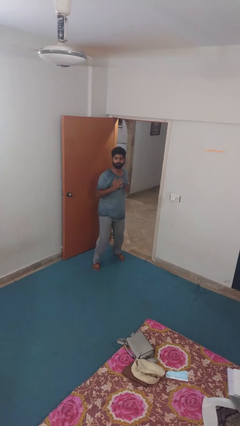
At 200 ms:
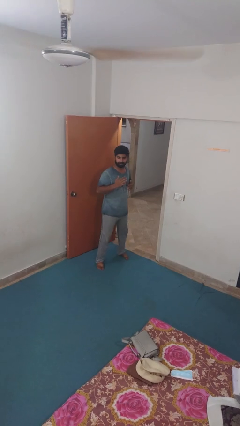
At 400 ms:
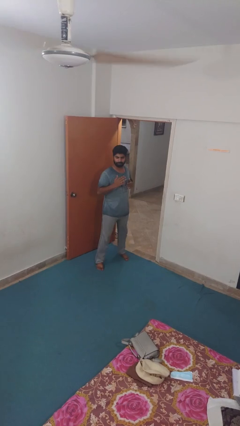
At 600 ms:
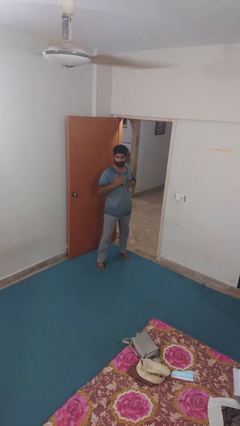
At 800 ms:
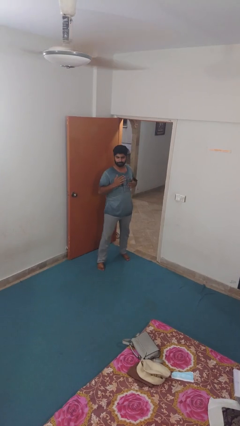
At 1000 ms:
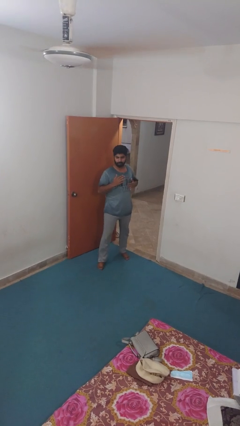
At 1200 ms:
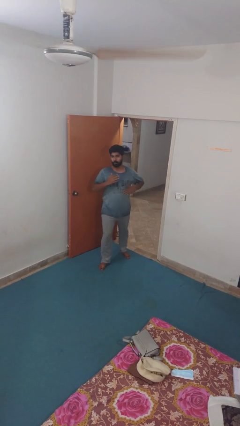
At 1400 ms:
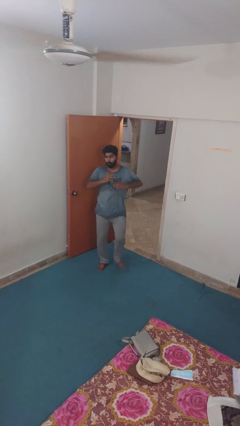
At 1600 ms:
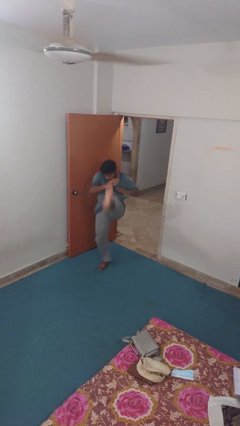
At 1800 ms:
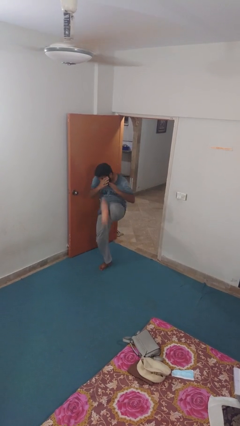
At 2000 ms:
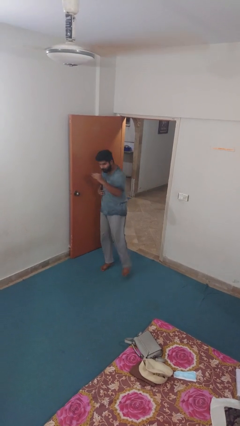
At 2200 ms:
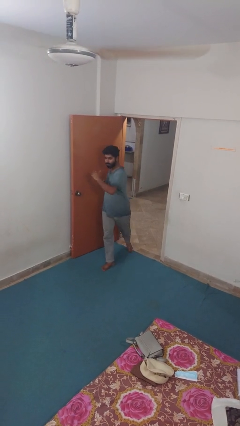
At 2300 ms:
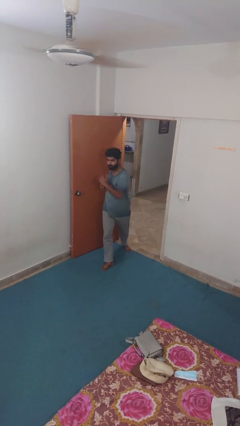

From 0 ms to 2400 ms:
person karate kicks

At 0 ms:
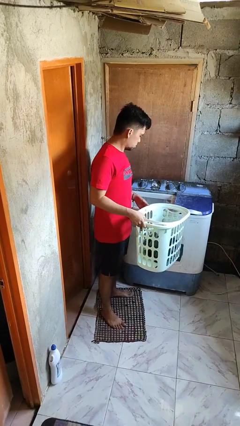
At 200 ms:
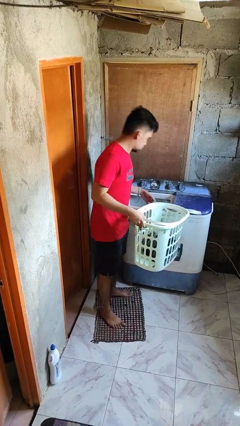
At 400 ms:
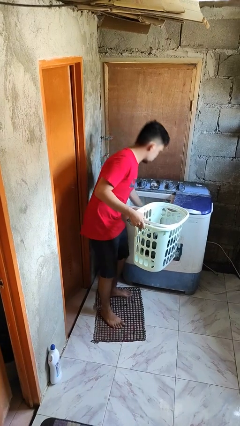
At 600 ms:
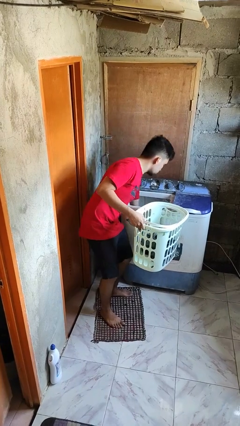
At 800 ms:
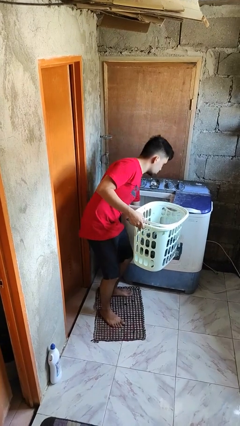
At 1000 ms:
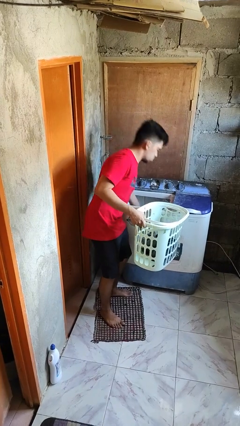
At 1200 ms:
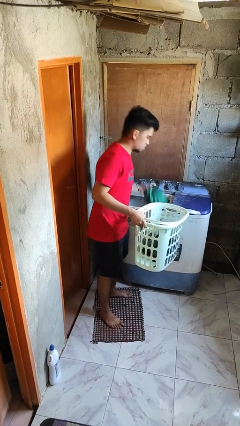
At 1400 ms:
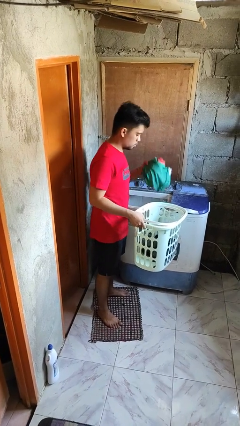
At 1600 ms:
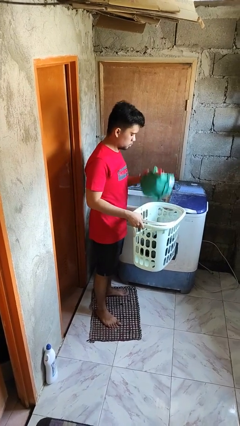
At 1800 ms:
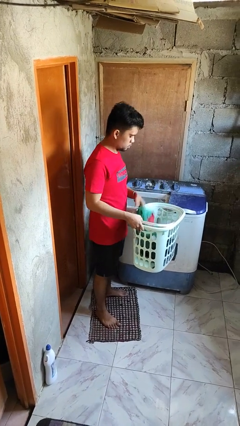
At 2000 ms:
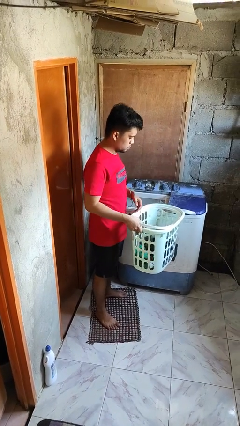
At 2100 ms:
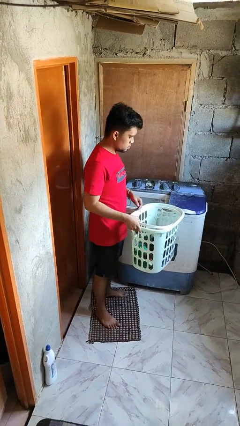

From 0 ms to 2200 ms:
person loads clotheswasher

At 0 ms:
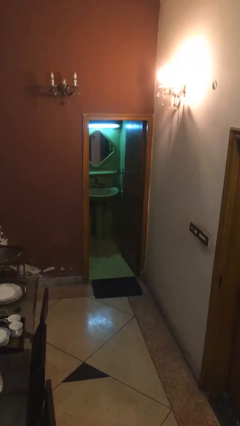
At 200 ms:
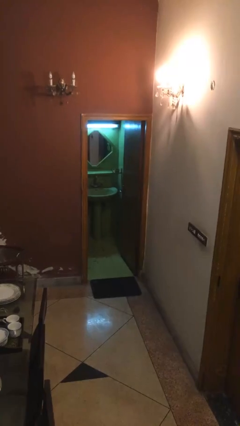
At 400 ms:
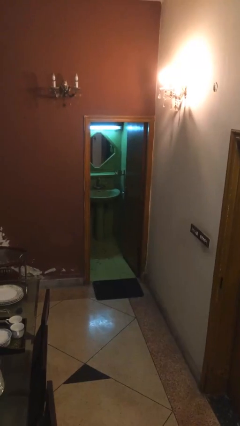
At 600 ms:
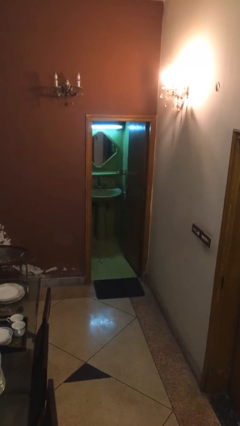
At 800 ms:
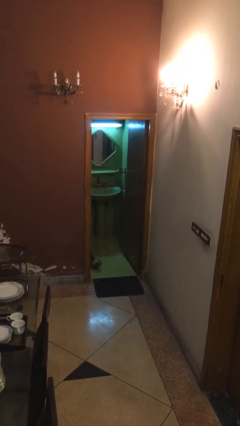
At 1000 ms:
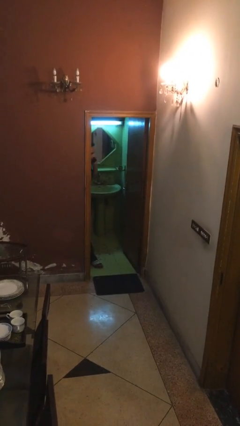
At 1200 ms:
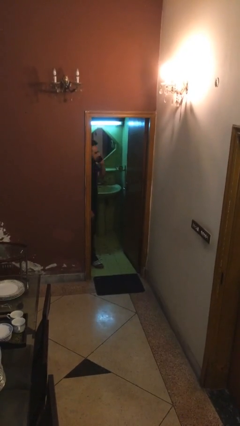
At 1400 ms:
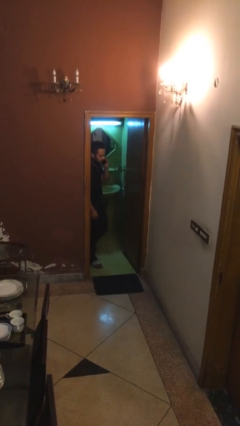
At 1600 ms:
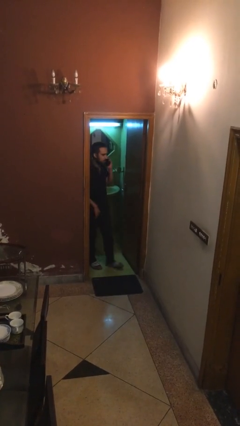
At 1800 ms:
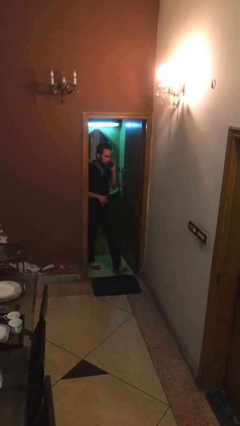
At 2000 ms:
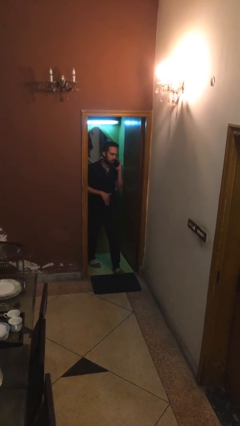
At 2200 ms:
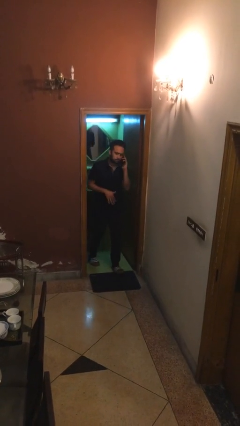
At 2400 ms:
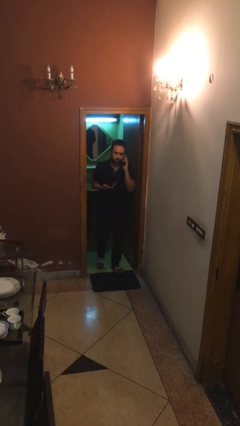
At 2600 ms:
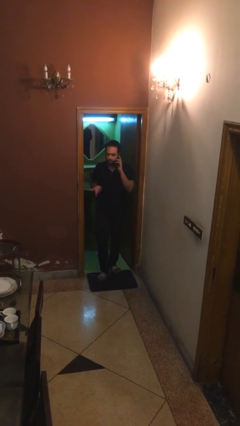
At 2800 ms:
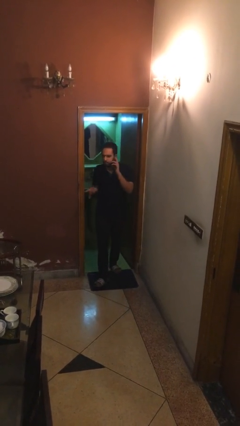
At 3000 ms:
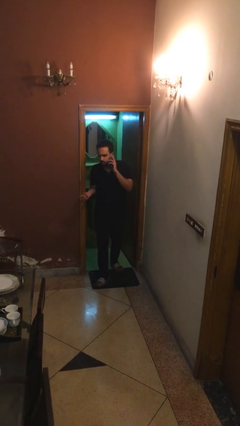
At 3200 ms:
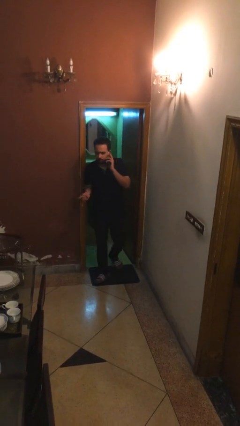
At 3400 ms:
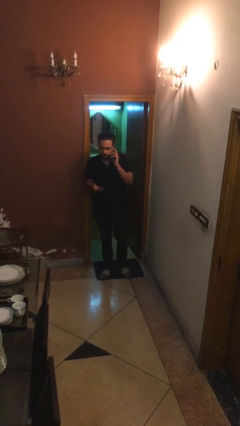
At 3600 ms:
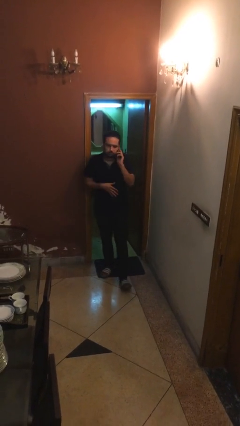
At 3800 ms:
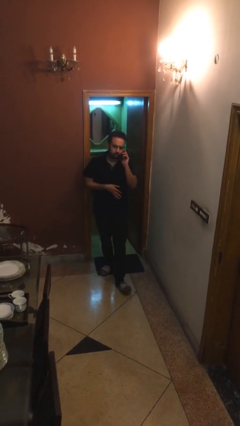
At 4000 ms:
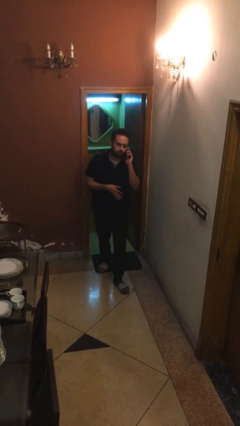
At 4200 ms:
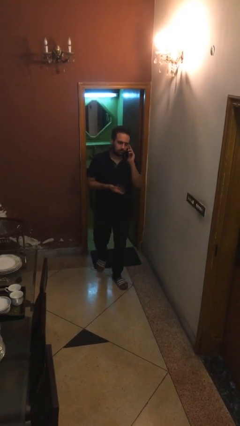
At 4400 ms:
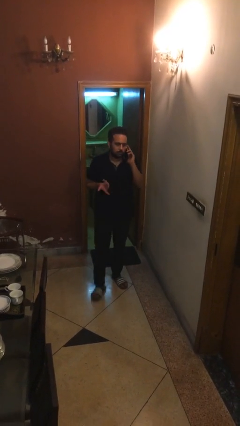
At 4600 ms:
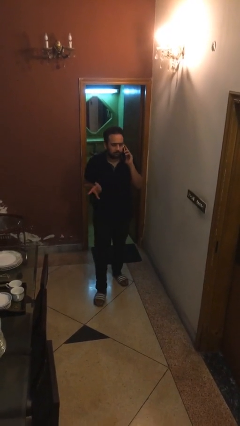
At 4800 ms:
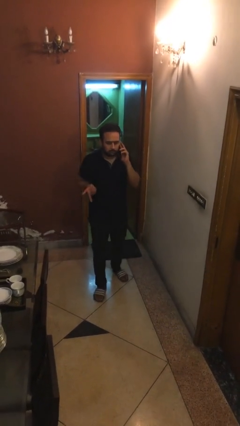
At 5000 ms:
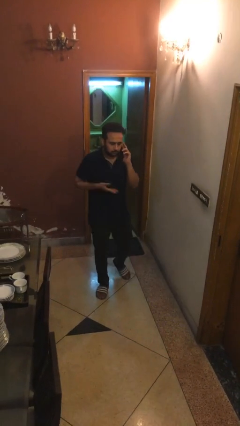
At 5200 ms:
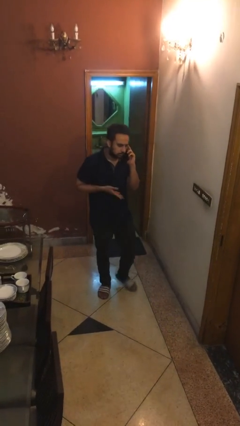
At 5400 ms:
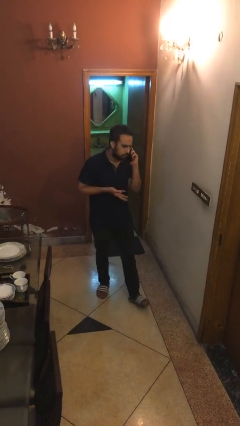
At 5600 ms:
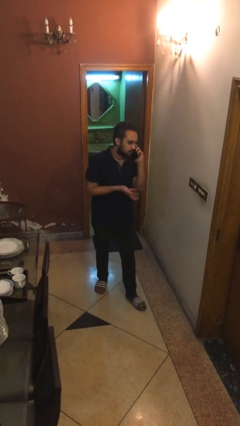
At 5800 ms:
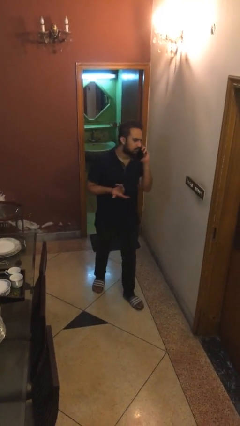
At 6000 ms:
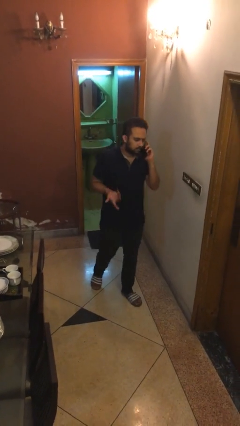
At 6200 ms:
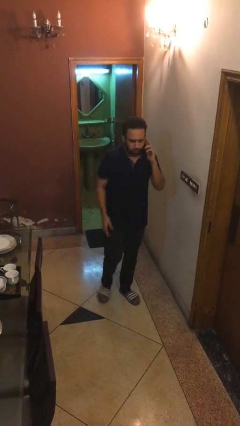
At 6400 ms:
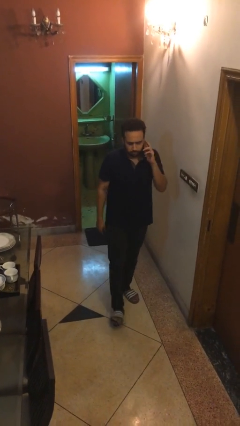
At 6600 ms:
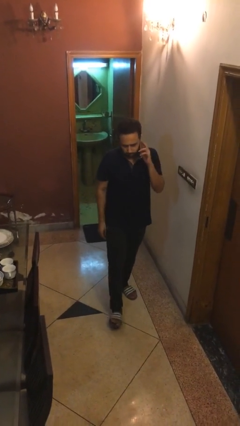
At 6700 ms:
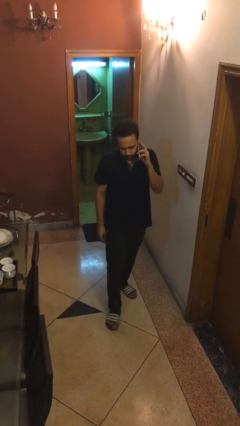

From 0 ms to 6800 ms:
person enters scene through structure

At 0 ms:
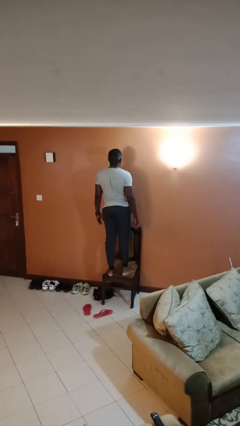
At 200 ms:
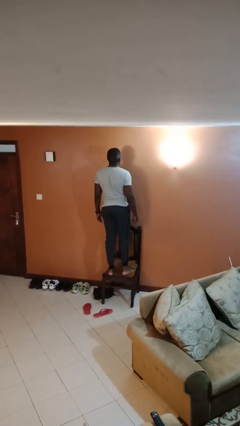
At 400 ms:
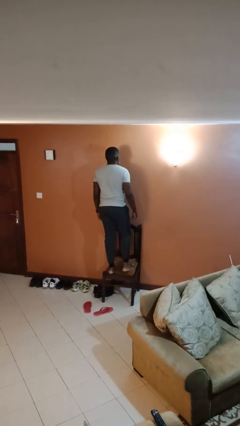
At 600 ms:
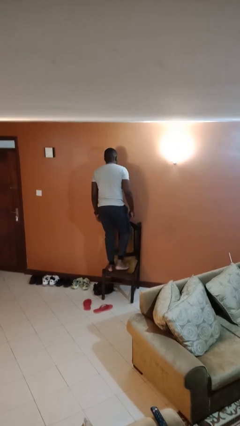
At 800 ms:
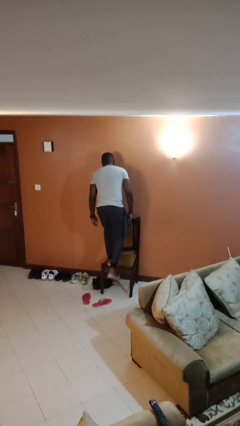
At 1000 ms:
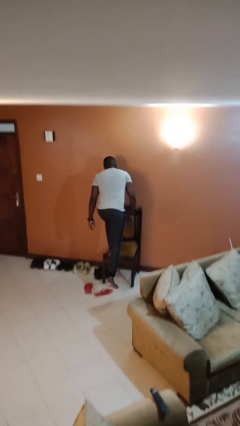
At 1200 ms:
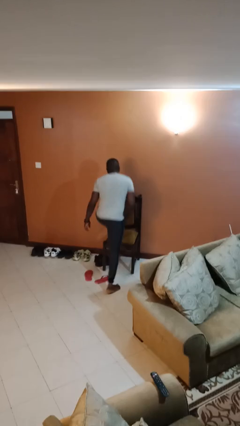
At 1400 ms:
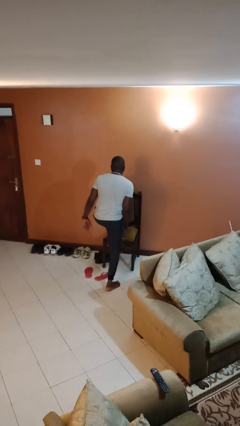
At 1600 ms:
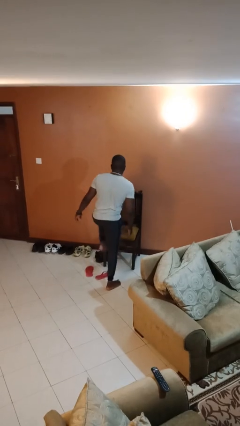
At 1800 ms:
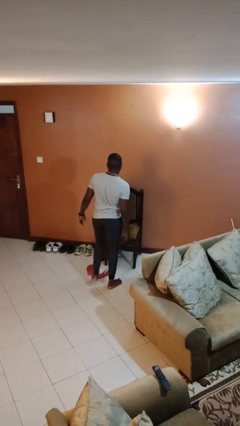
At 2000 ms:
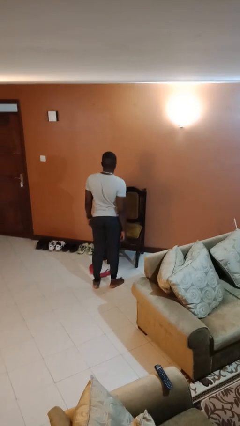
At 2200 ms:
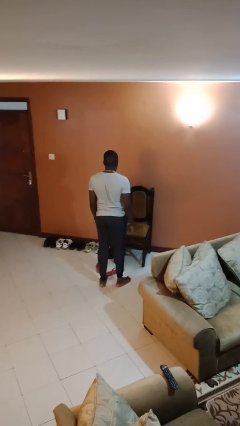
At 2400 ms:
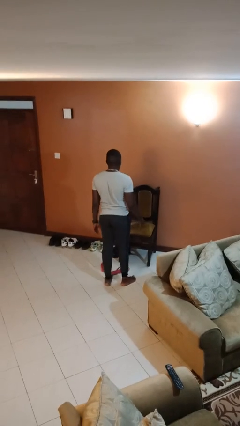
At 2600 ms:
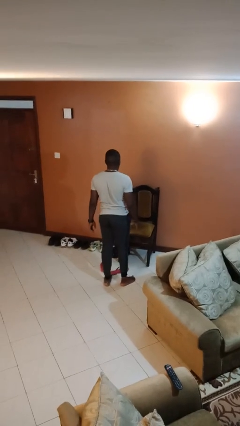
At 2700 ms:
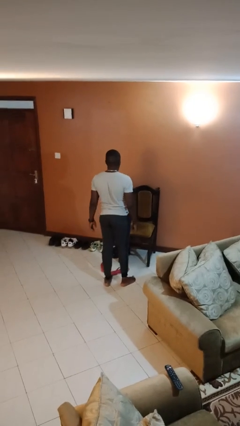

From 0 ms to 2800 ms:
person climbs off chair

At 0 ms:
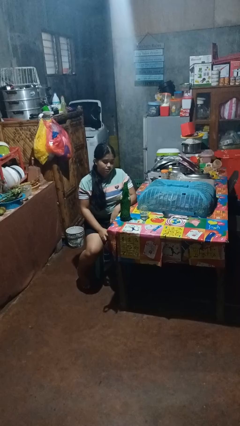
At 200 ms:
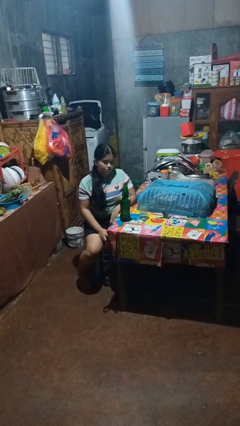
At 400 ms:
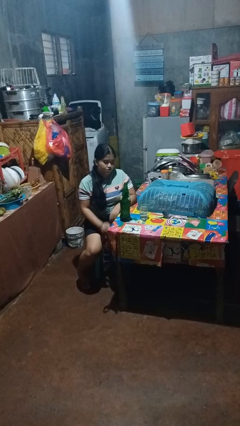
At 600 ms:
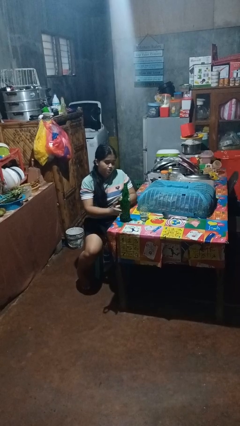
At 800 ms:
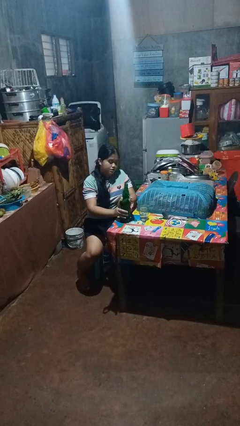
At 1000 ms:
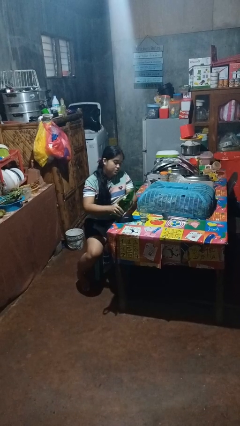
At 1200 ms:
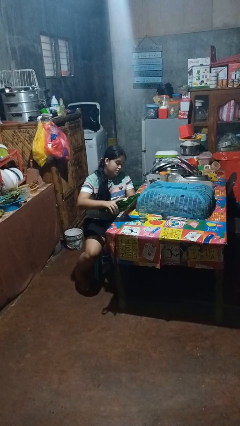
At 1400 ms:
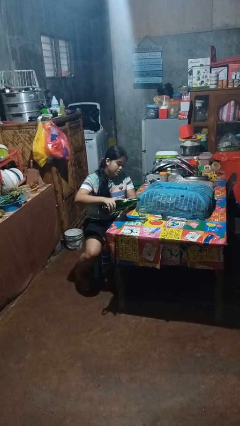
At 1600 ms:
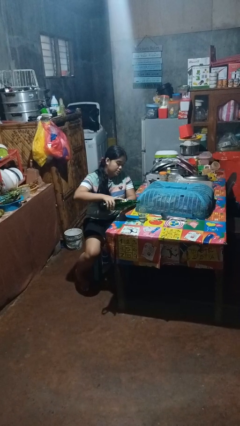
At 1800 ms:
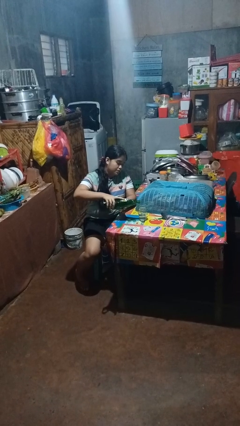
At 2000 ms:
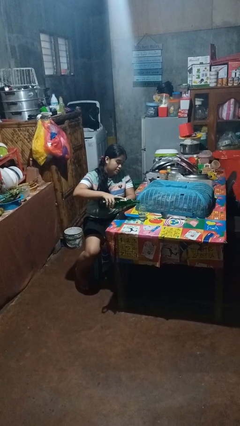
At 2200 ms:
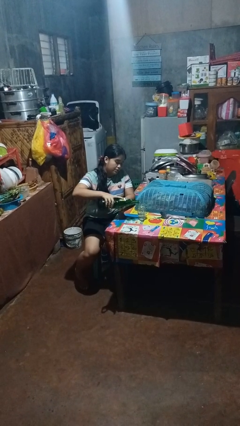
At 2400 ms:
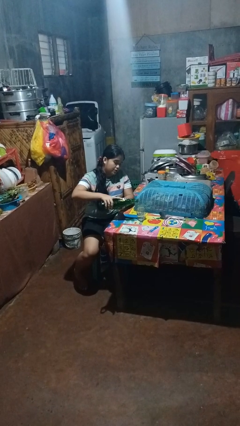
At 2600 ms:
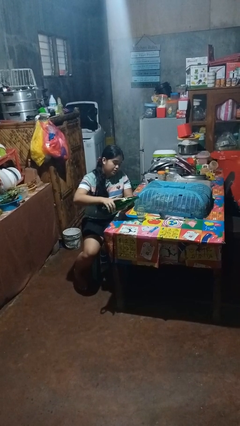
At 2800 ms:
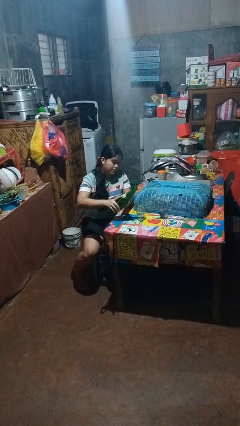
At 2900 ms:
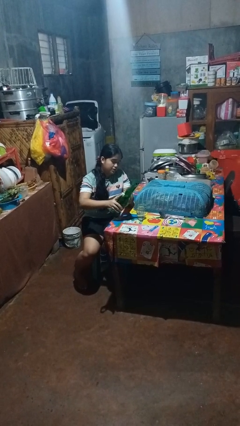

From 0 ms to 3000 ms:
person pours liquid into cup

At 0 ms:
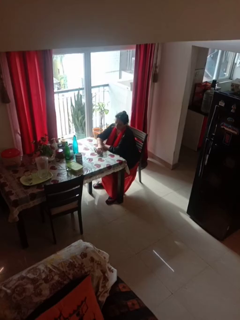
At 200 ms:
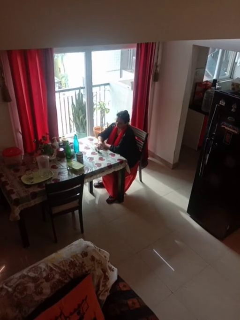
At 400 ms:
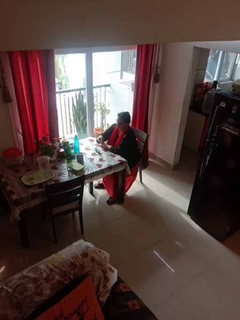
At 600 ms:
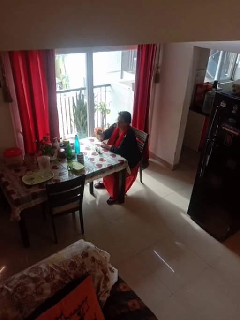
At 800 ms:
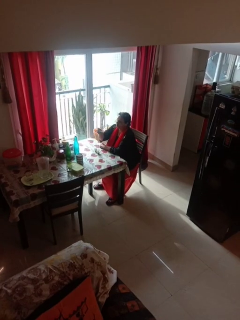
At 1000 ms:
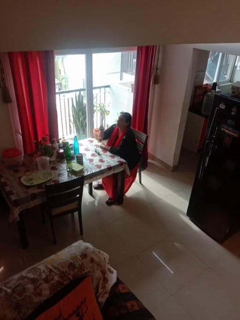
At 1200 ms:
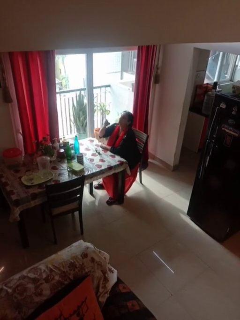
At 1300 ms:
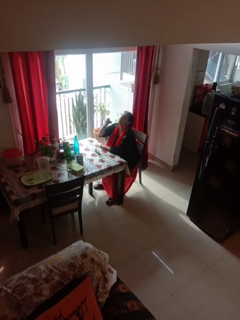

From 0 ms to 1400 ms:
person picks up object from table
